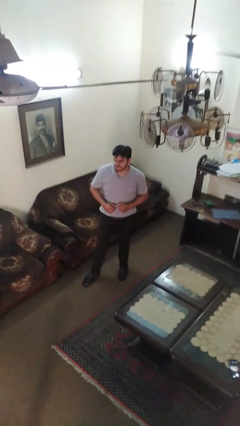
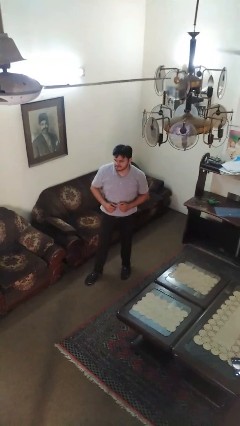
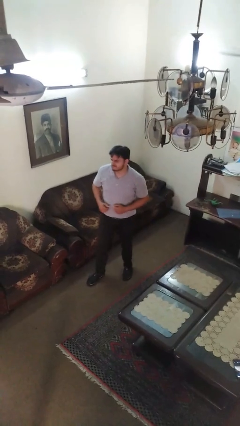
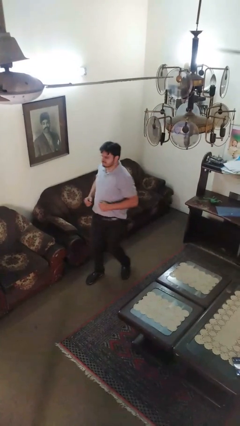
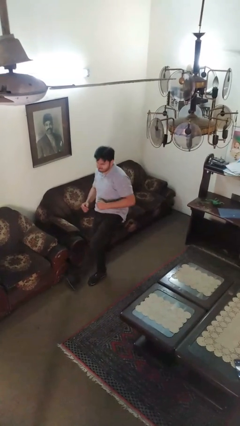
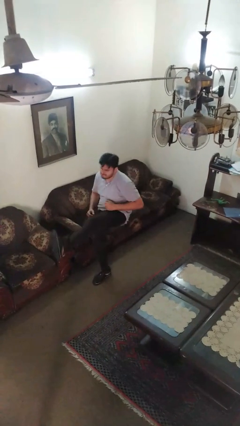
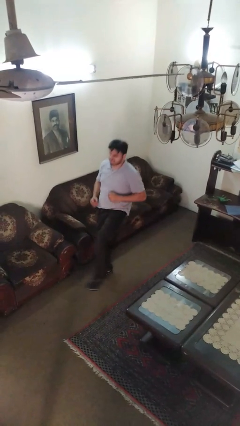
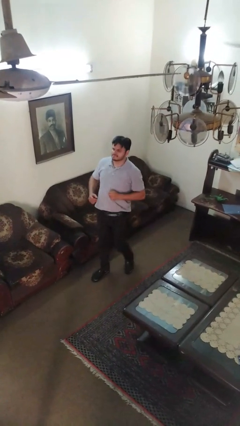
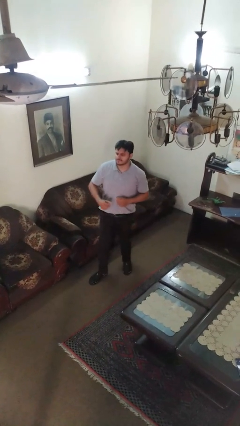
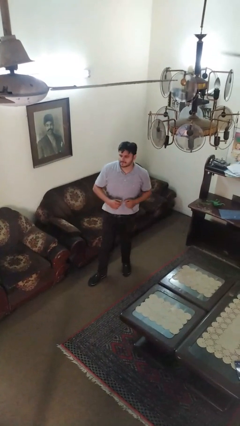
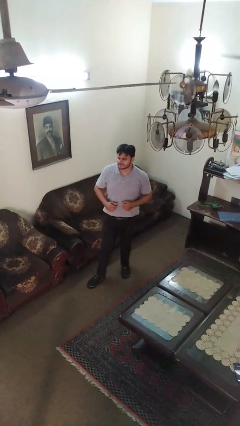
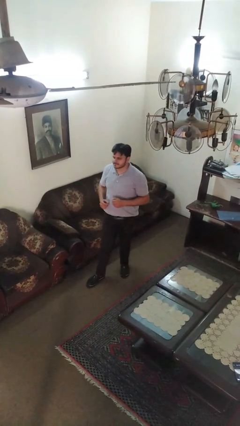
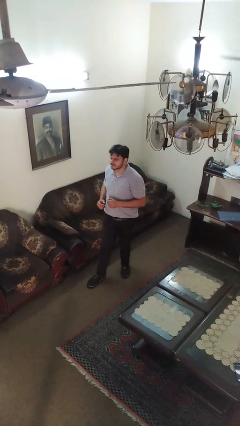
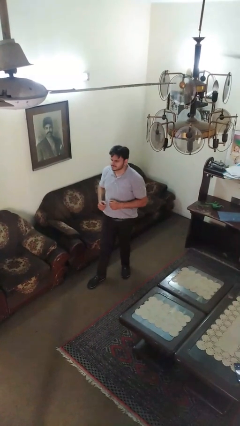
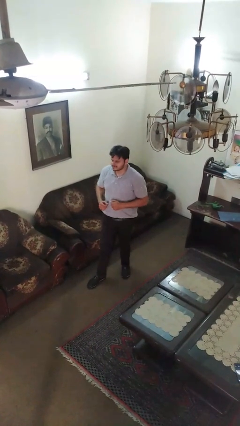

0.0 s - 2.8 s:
person karate kicks

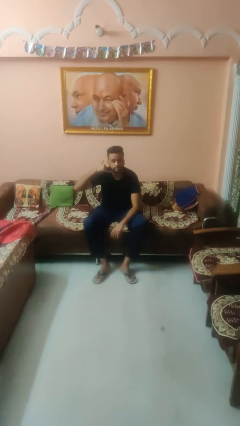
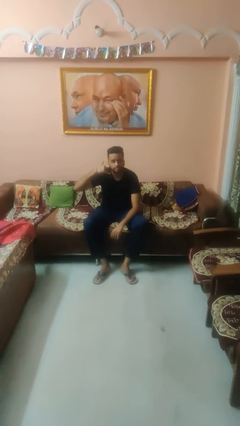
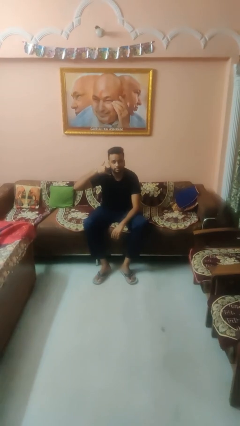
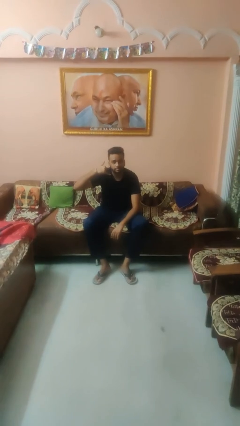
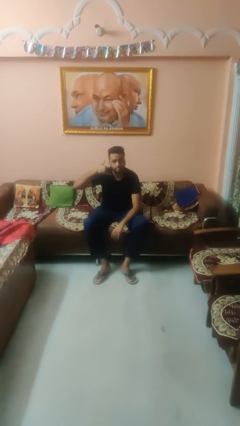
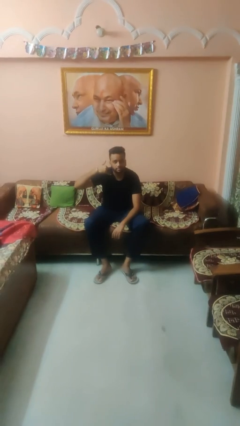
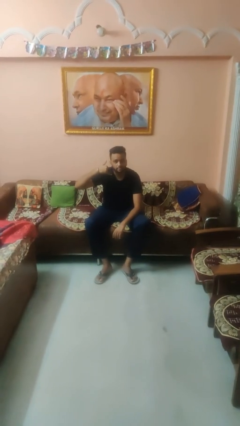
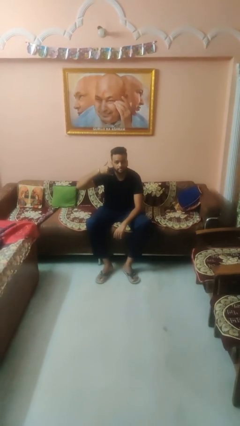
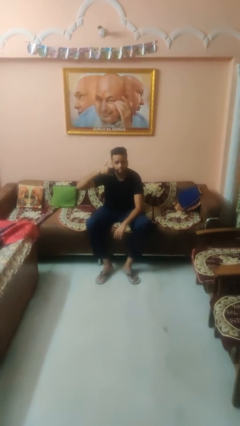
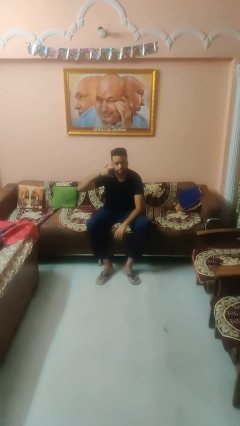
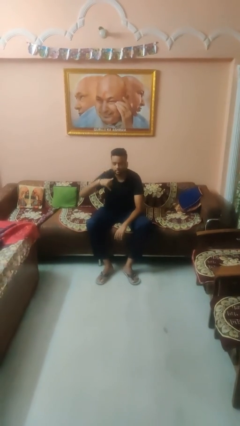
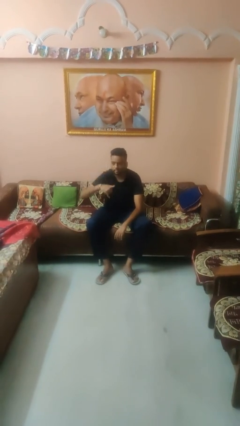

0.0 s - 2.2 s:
person gestures call me

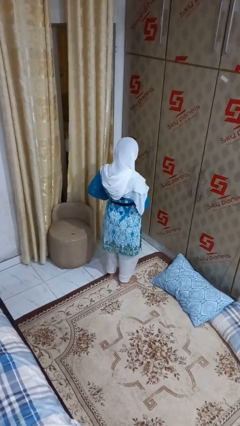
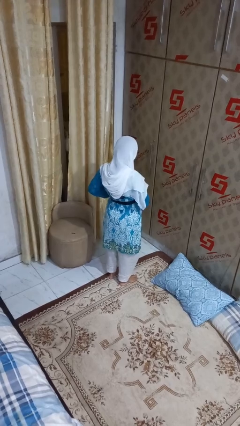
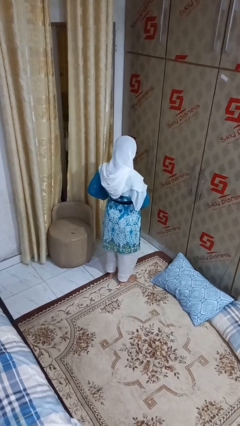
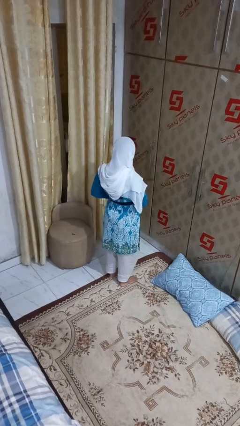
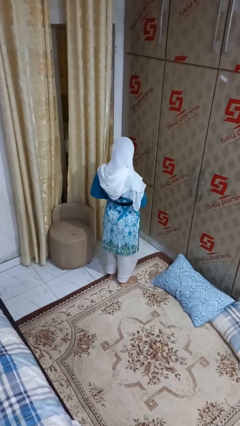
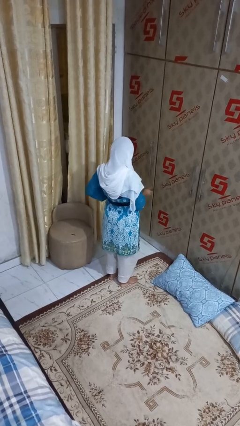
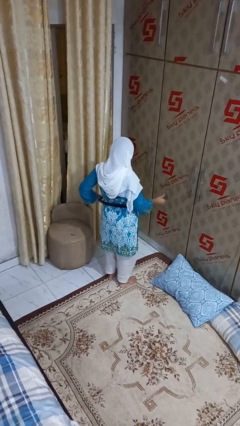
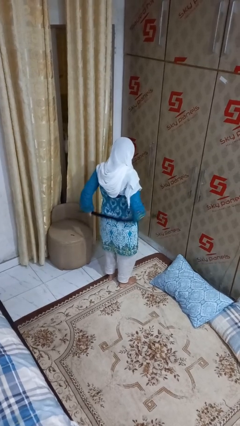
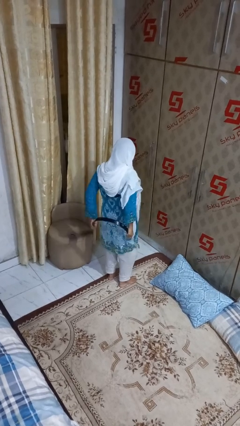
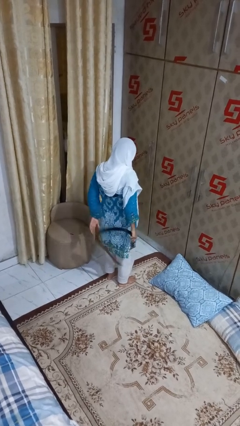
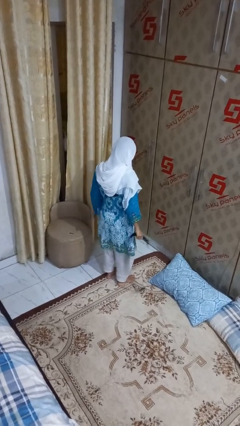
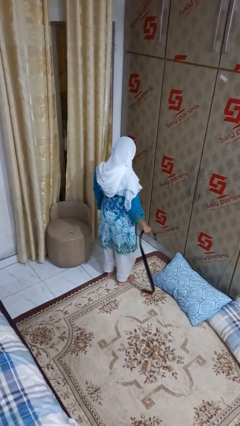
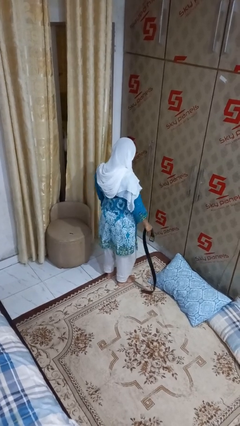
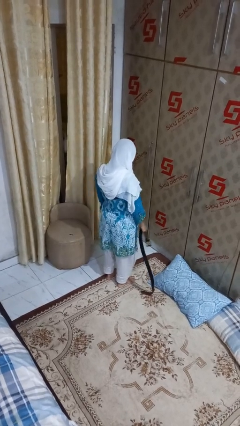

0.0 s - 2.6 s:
person takes off belt

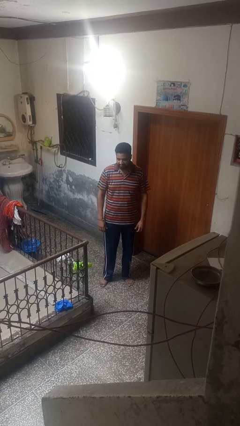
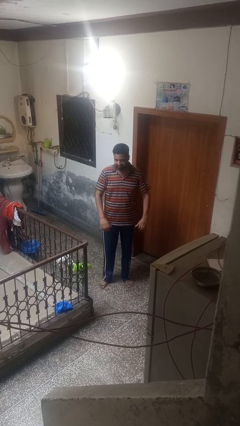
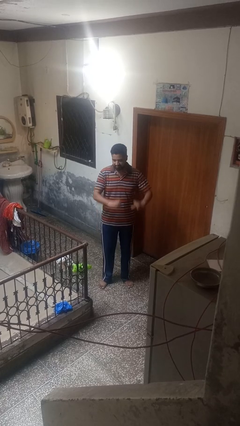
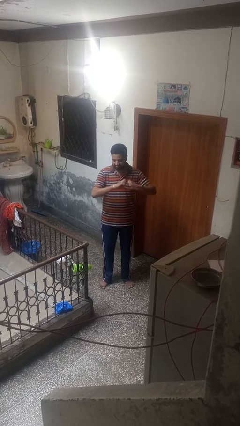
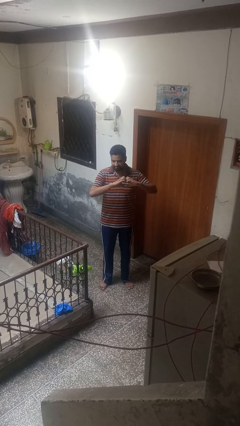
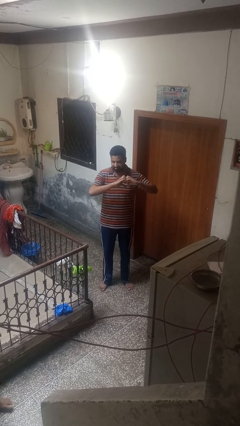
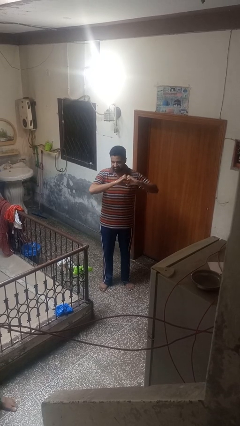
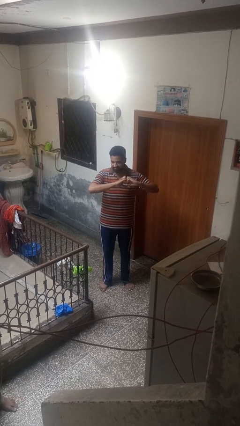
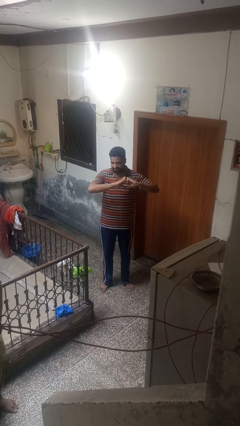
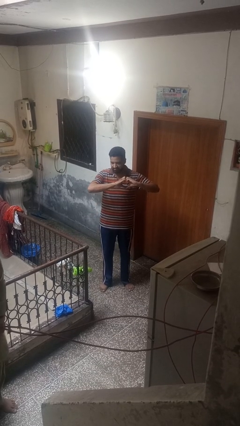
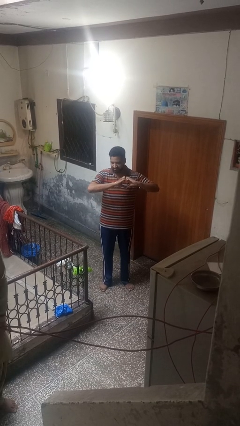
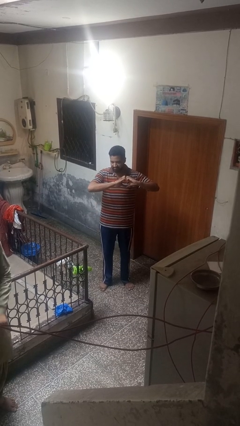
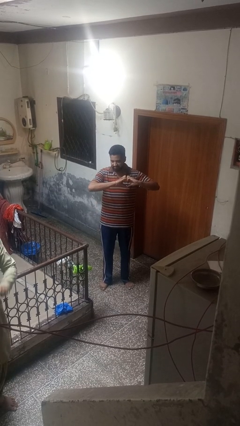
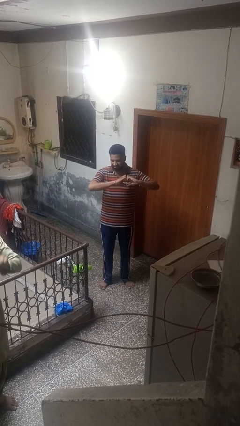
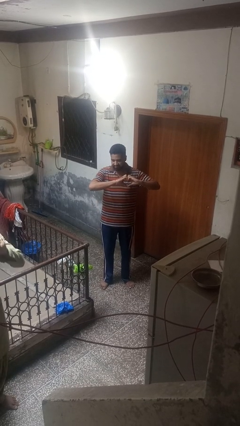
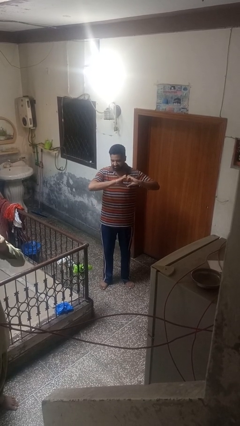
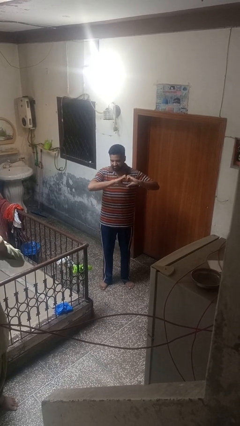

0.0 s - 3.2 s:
person gestures heart

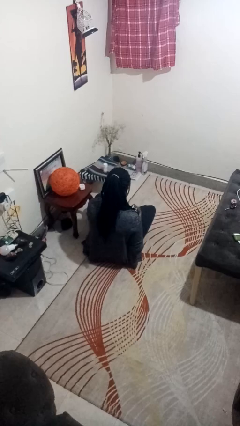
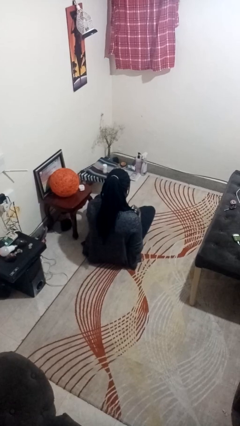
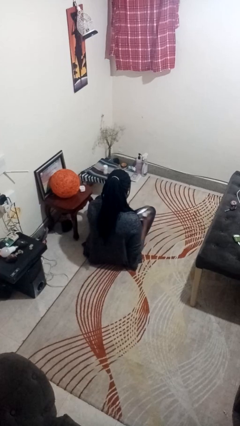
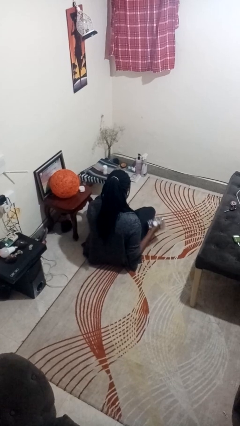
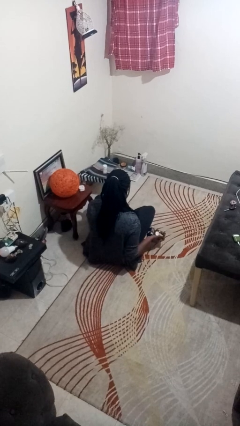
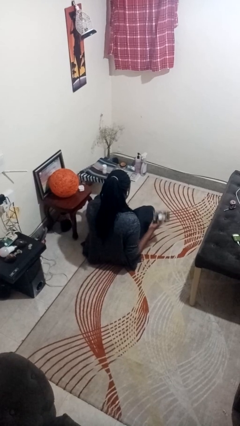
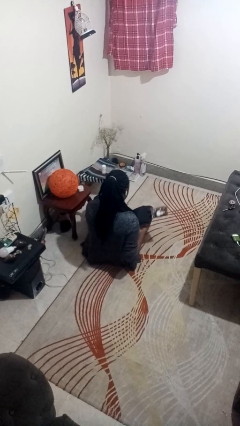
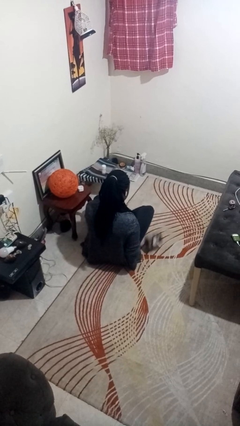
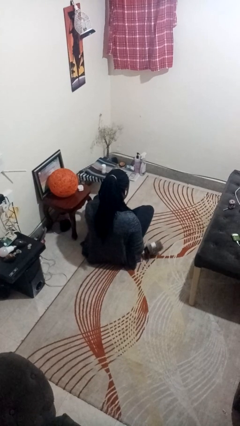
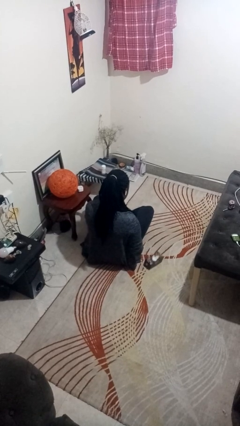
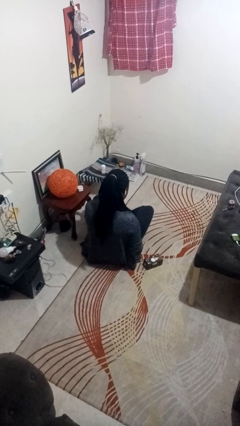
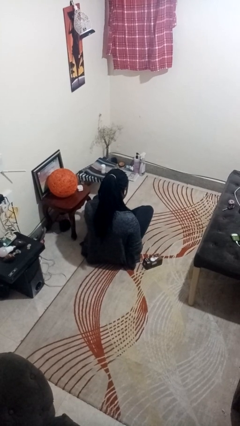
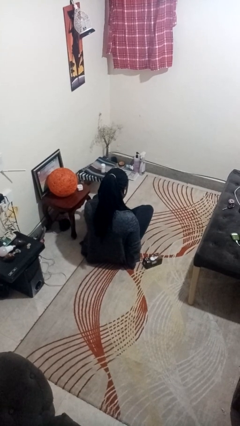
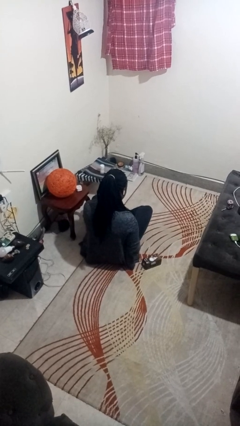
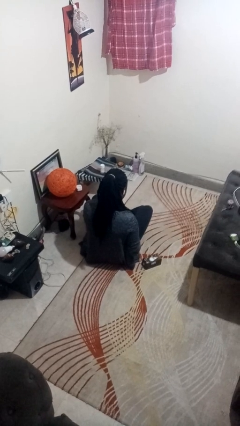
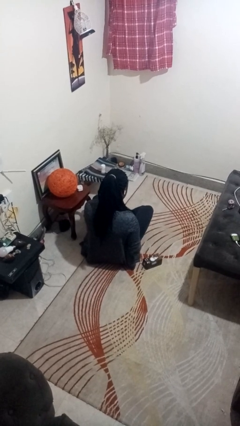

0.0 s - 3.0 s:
person throws object into air

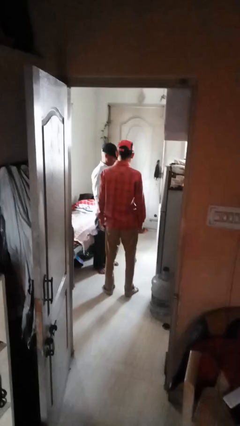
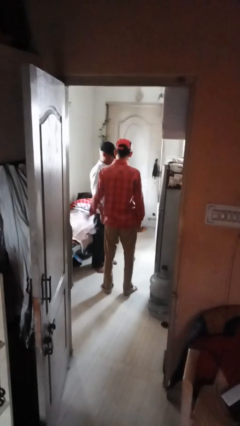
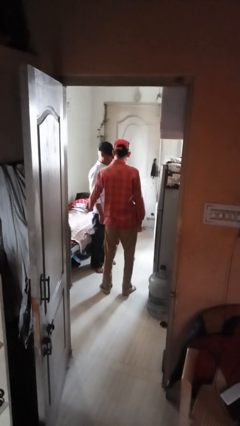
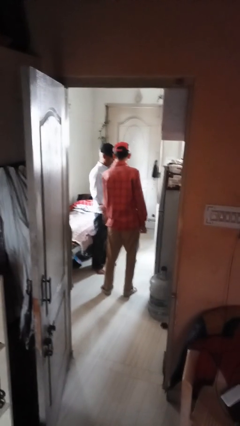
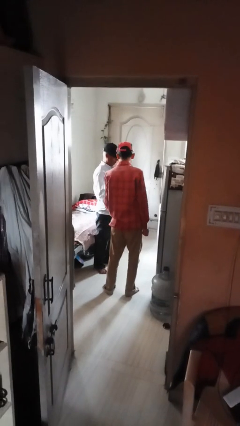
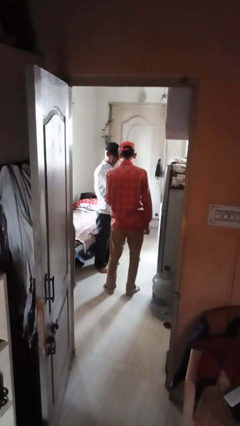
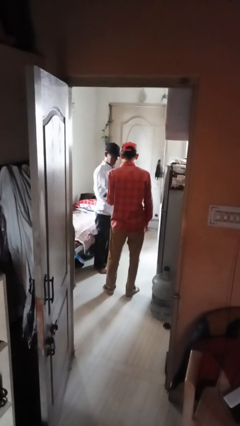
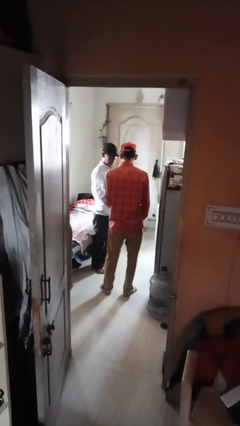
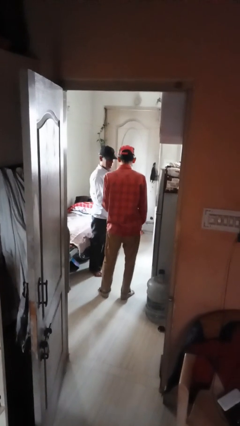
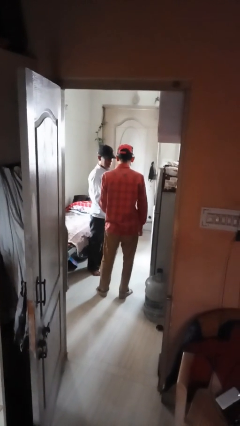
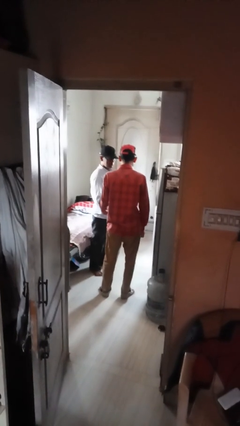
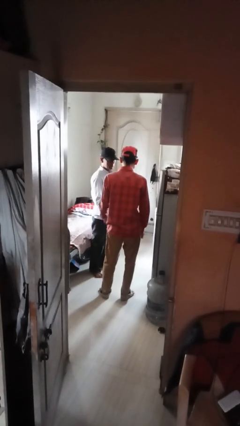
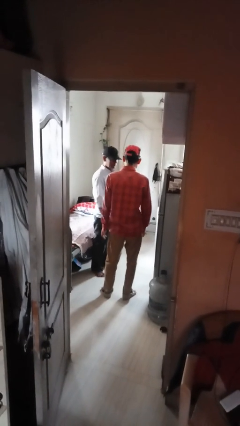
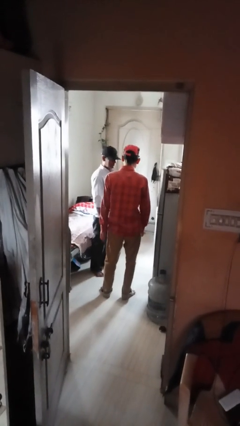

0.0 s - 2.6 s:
person grabs person by forearm

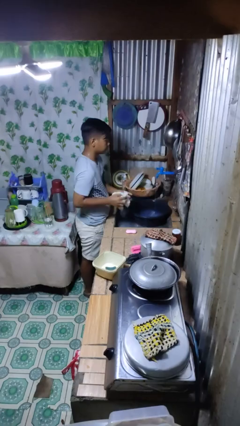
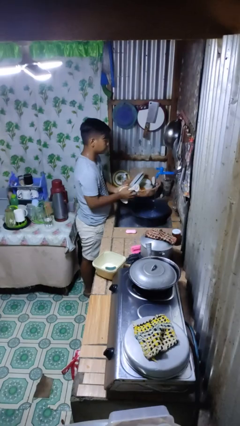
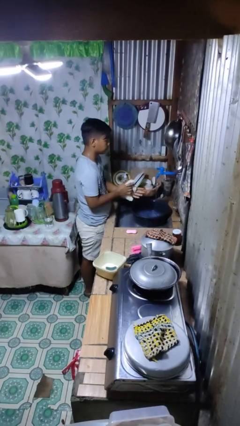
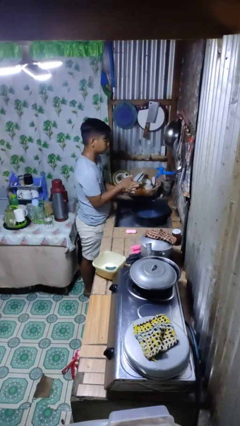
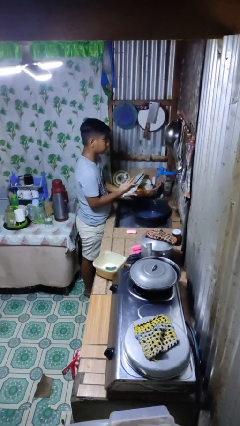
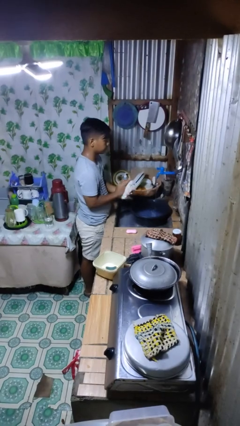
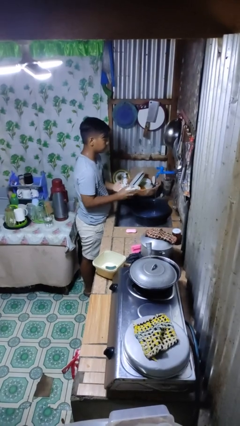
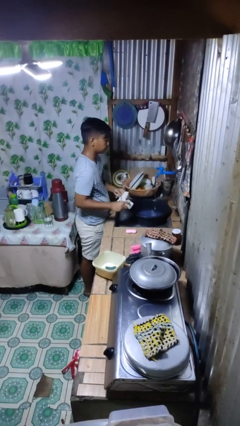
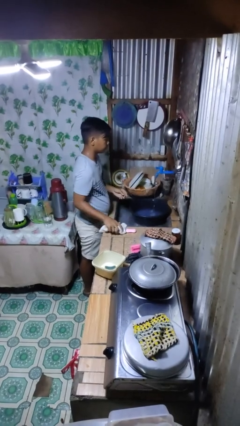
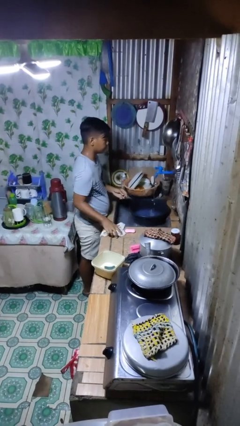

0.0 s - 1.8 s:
person dries hands with towel
